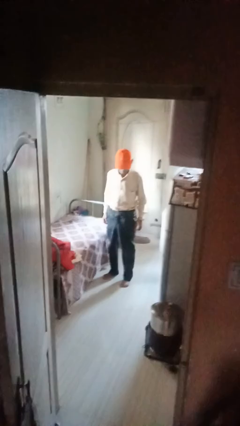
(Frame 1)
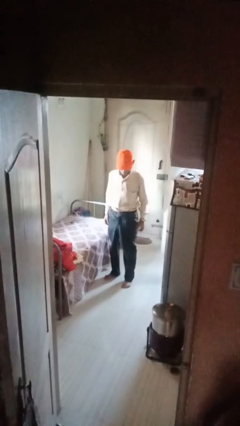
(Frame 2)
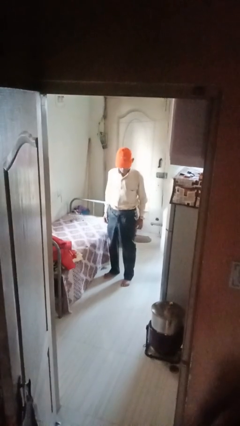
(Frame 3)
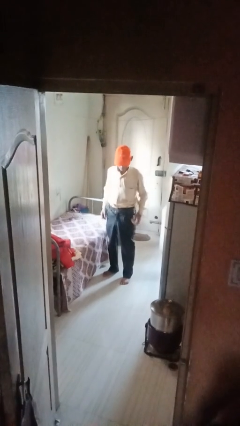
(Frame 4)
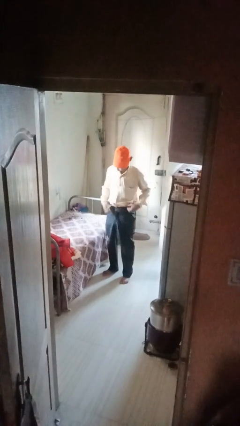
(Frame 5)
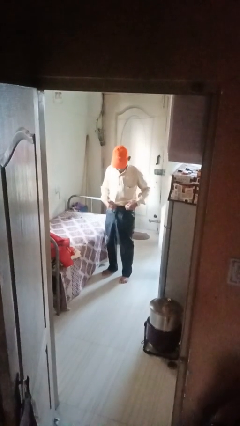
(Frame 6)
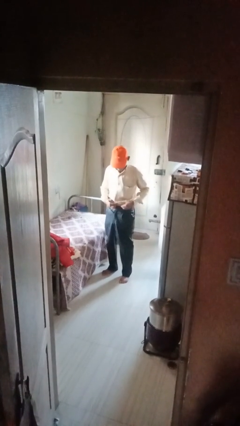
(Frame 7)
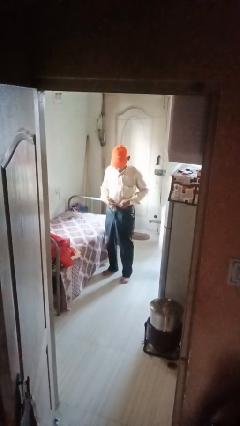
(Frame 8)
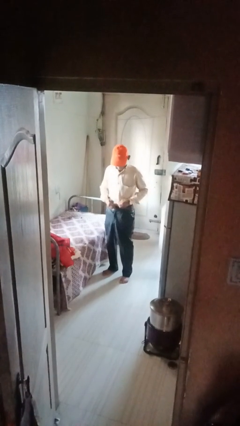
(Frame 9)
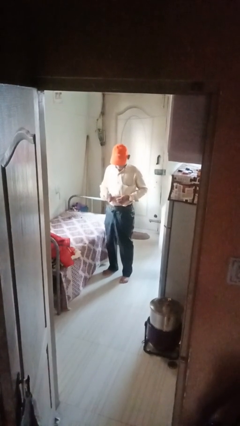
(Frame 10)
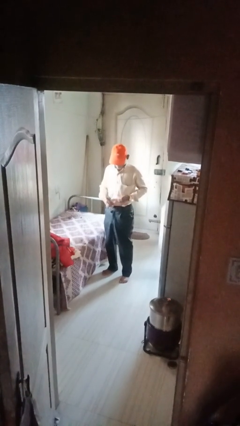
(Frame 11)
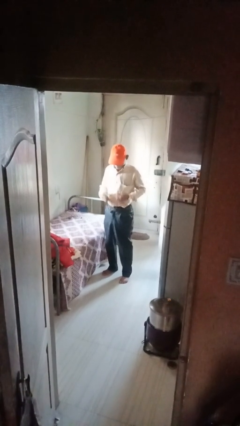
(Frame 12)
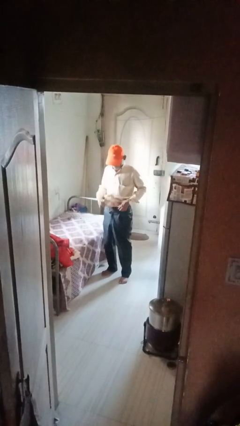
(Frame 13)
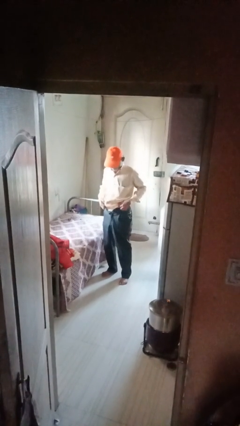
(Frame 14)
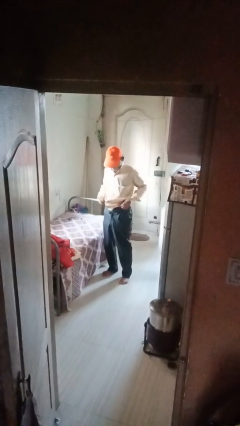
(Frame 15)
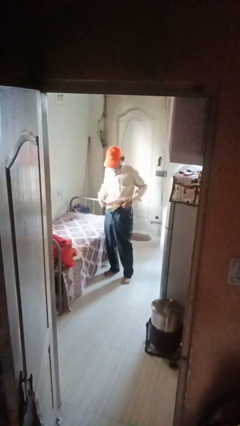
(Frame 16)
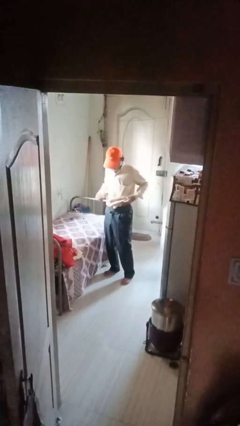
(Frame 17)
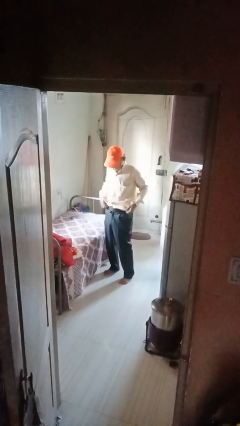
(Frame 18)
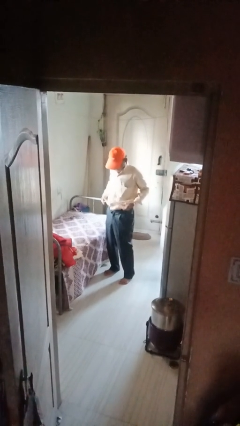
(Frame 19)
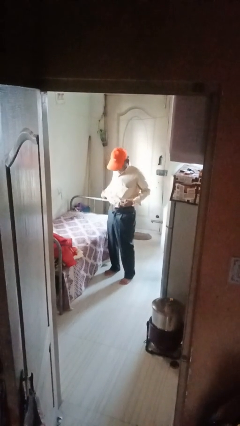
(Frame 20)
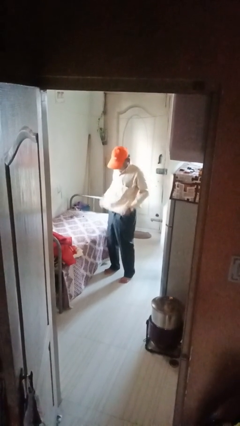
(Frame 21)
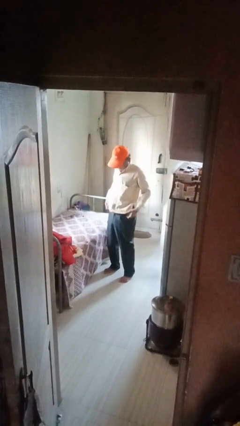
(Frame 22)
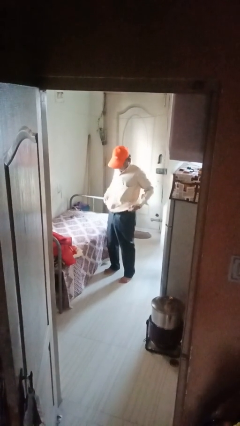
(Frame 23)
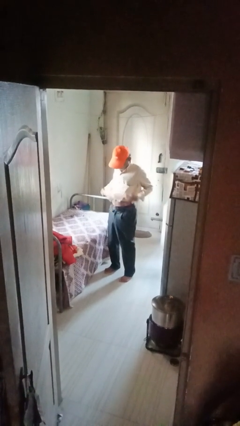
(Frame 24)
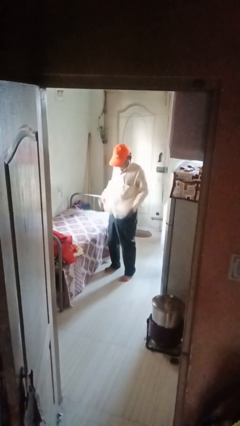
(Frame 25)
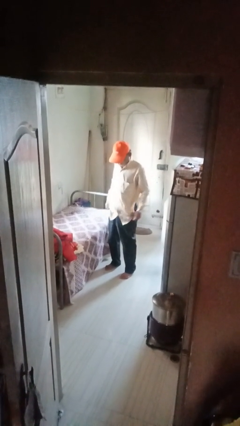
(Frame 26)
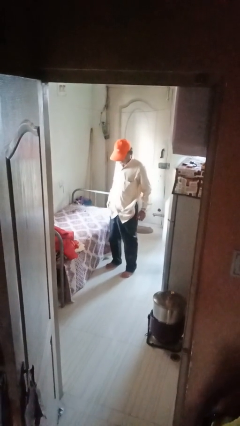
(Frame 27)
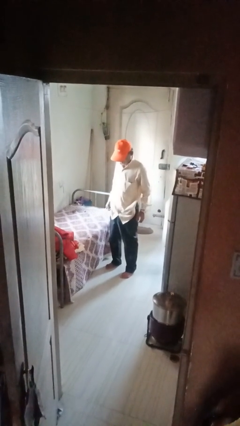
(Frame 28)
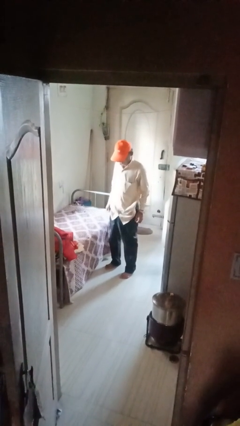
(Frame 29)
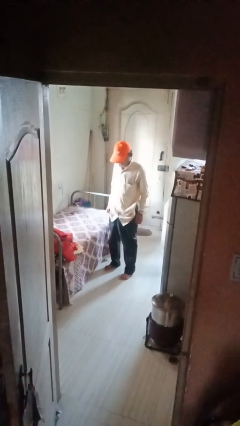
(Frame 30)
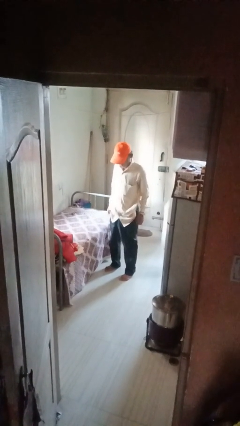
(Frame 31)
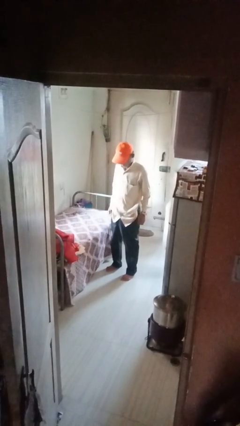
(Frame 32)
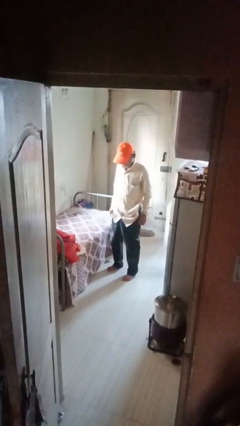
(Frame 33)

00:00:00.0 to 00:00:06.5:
person untucks shirt

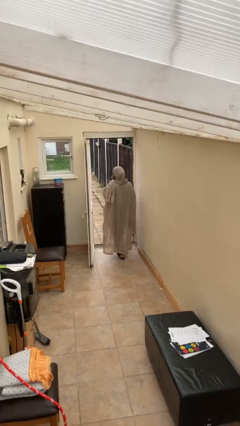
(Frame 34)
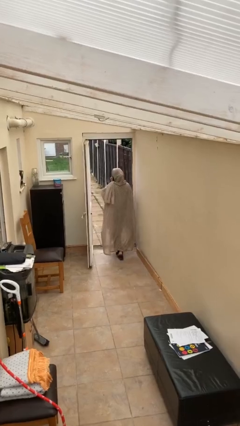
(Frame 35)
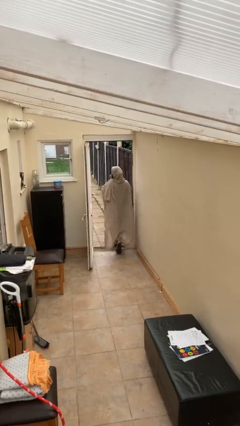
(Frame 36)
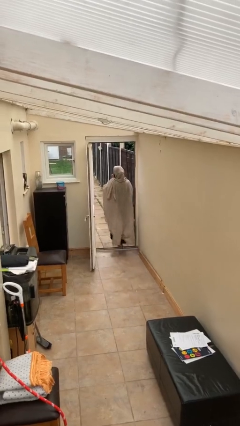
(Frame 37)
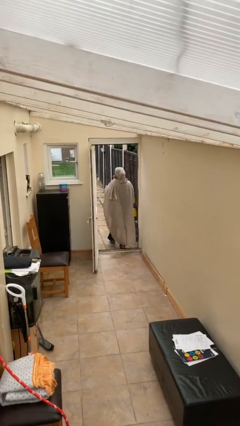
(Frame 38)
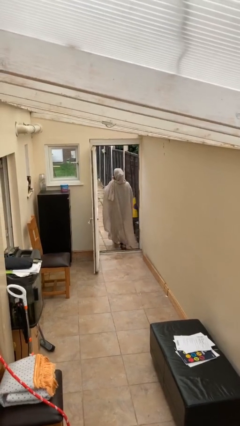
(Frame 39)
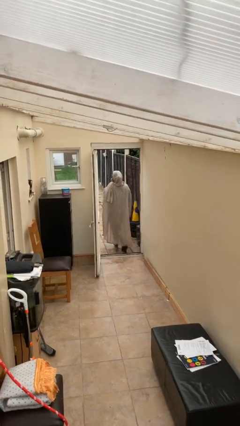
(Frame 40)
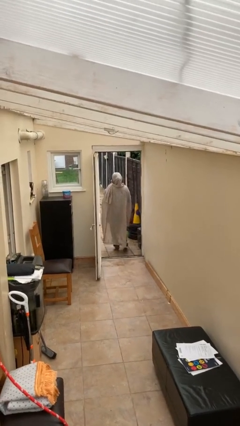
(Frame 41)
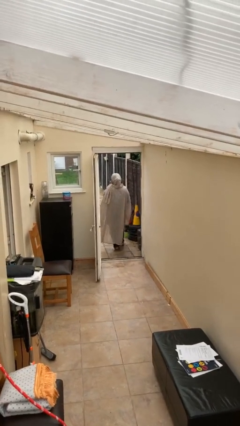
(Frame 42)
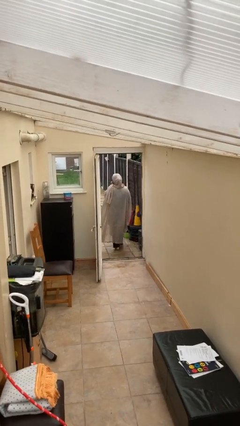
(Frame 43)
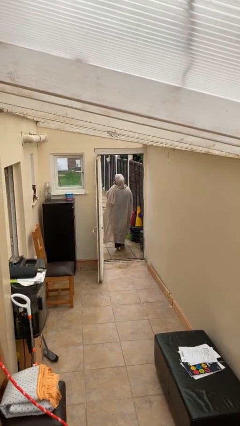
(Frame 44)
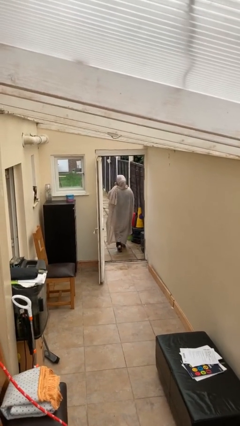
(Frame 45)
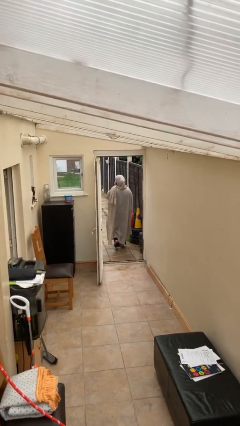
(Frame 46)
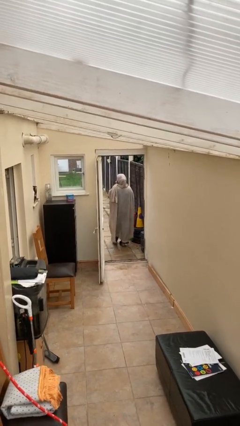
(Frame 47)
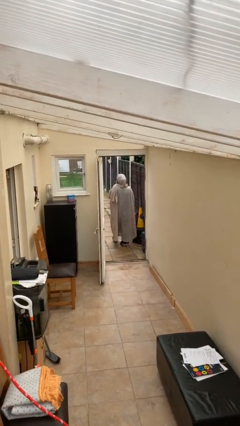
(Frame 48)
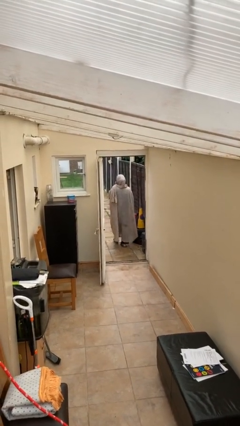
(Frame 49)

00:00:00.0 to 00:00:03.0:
person exits scene through structure

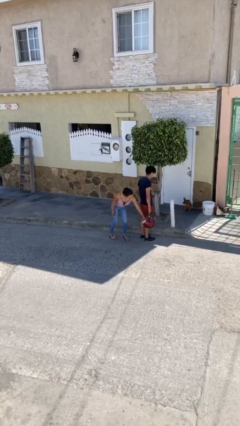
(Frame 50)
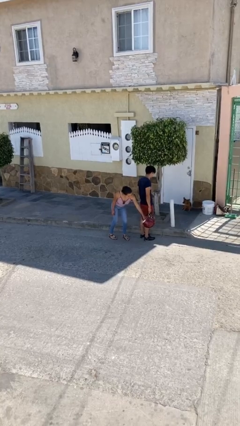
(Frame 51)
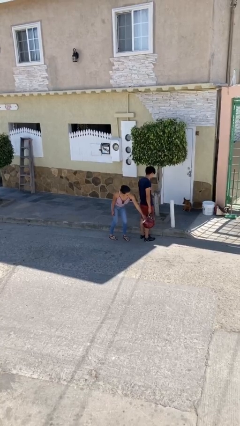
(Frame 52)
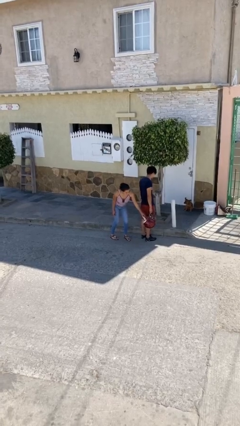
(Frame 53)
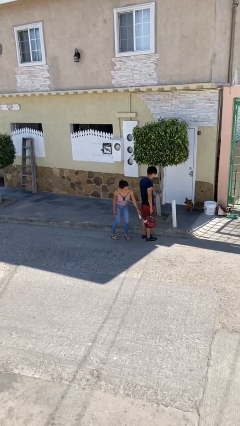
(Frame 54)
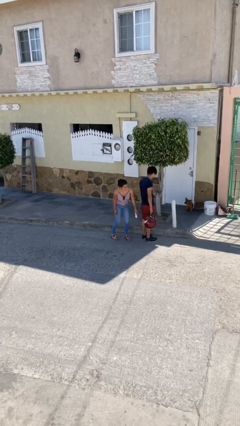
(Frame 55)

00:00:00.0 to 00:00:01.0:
person steals object from person

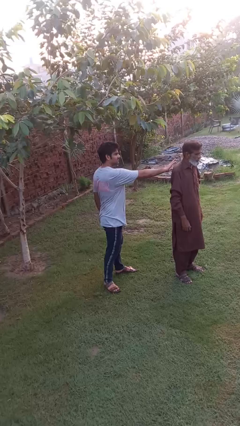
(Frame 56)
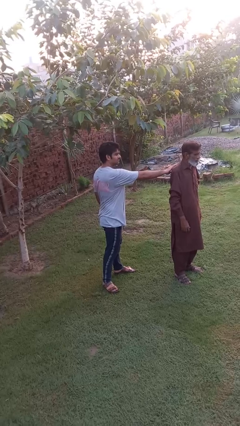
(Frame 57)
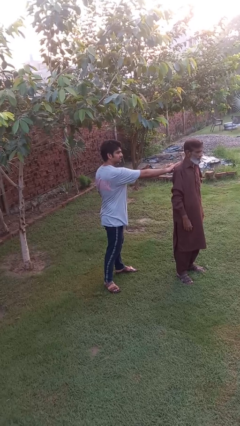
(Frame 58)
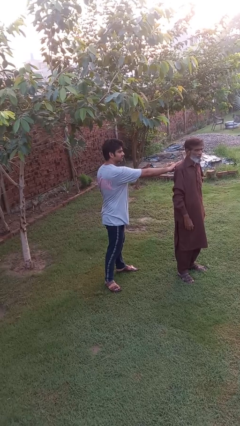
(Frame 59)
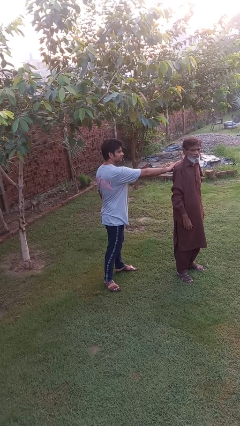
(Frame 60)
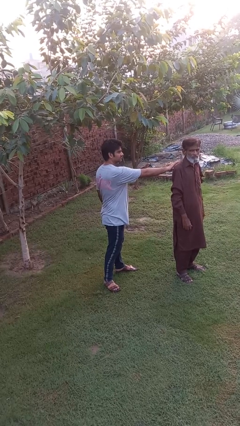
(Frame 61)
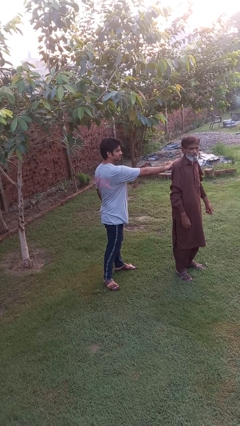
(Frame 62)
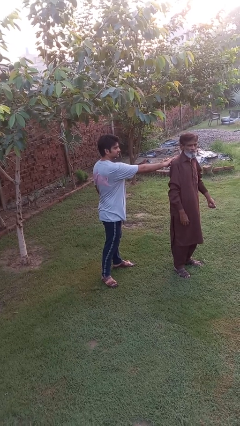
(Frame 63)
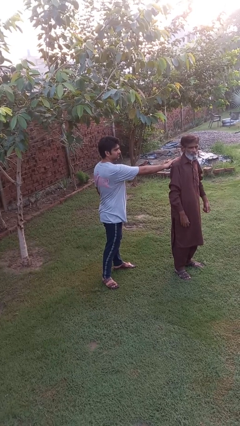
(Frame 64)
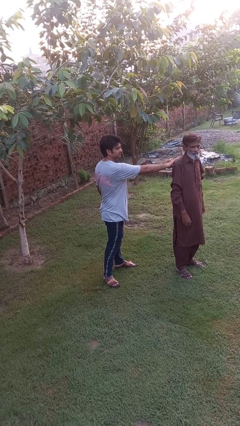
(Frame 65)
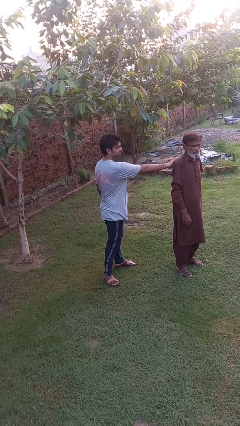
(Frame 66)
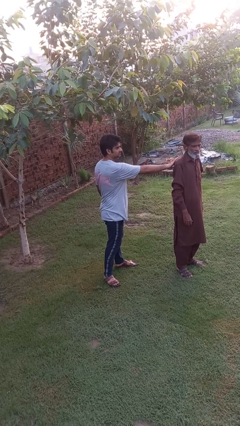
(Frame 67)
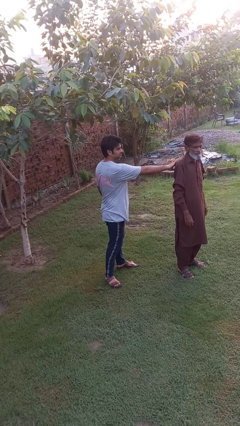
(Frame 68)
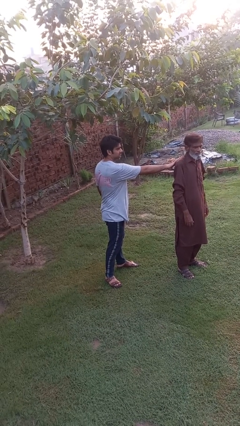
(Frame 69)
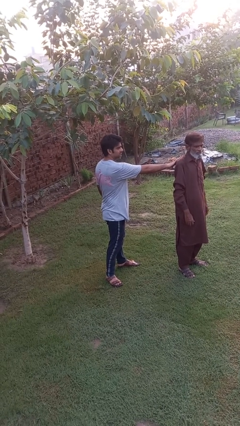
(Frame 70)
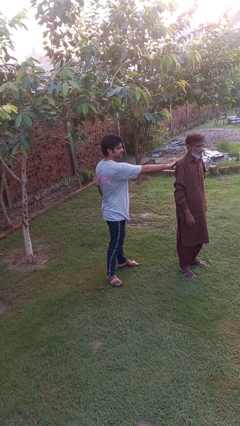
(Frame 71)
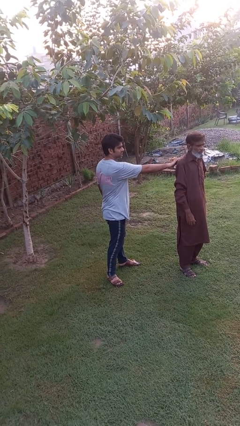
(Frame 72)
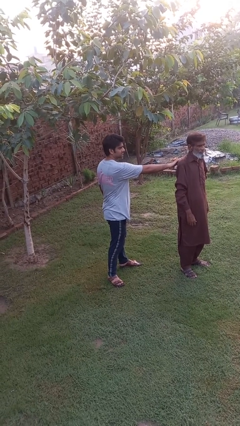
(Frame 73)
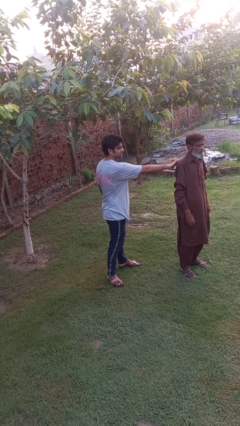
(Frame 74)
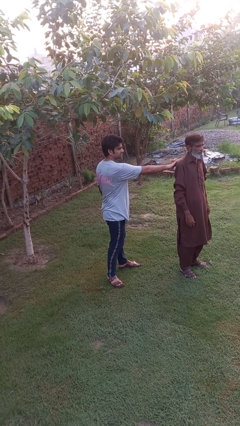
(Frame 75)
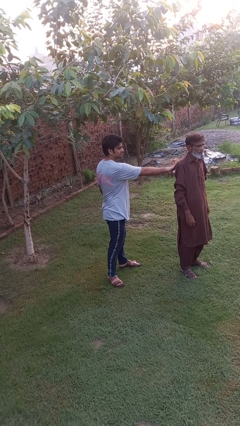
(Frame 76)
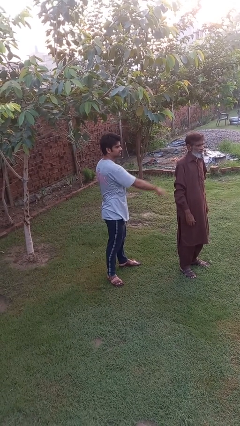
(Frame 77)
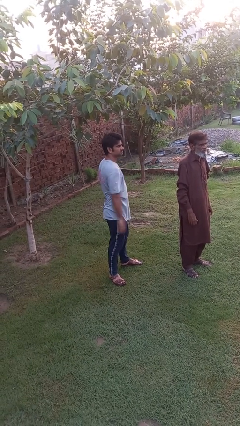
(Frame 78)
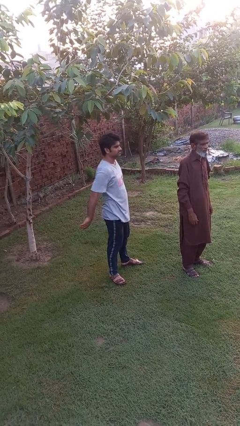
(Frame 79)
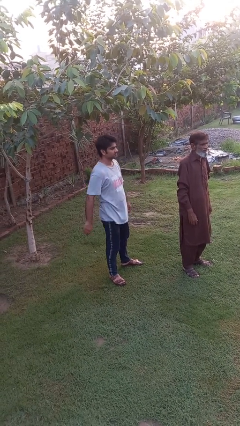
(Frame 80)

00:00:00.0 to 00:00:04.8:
person touches back of person

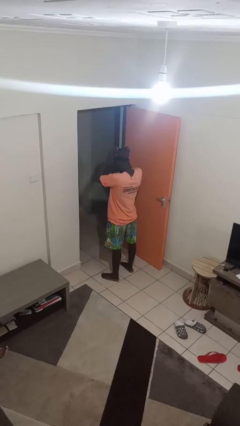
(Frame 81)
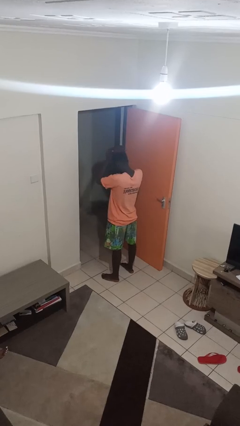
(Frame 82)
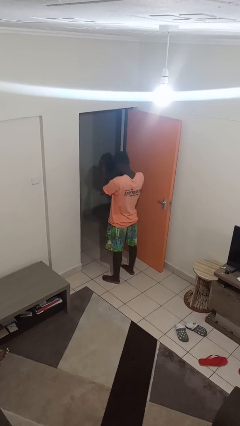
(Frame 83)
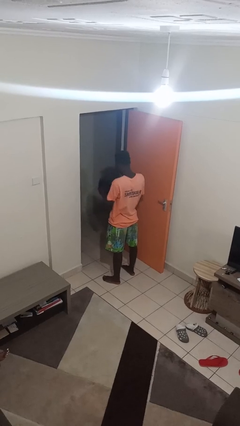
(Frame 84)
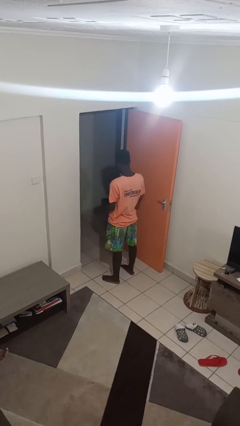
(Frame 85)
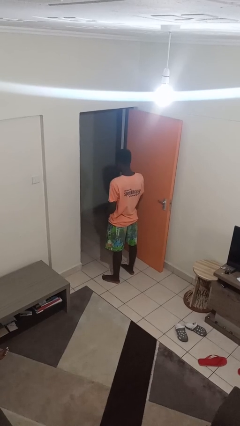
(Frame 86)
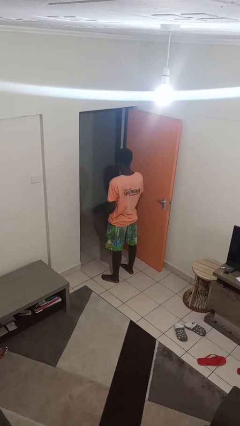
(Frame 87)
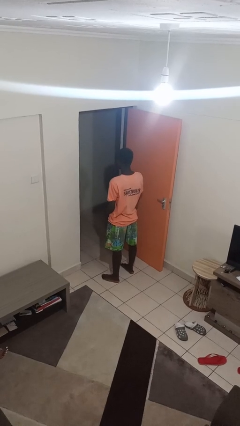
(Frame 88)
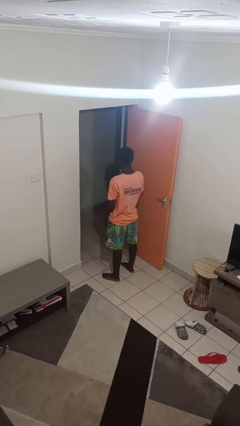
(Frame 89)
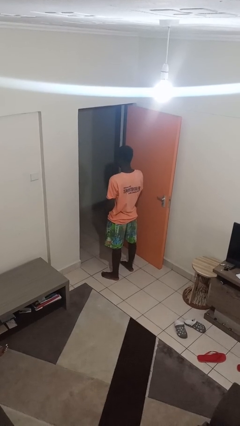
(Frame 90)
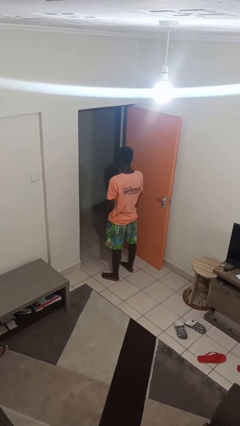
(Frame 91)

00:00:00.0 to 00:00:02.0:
person takes off hat

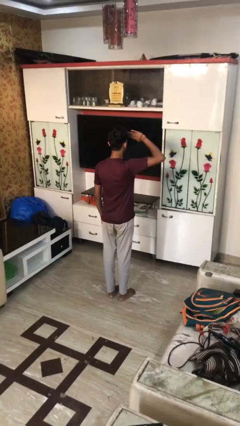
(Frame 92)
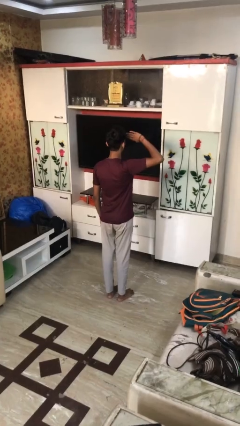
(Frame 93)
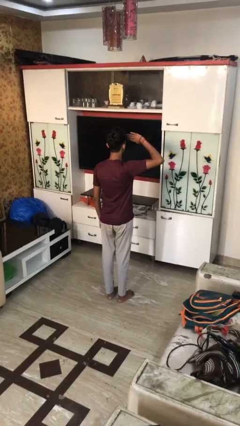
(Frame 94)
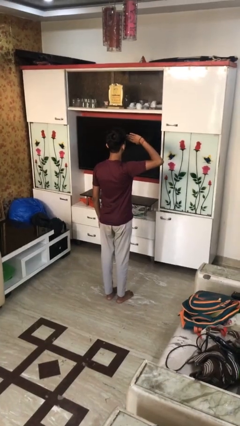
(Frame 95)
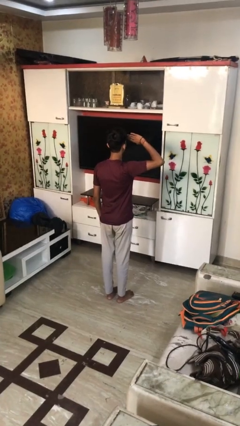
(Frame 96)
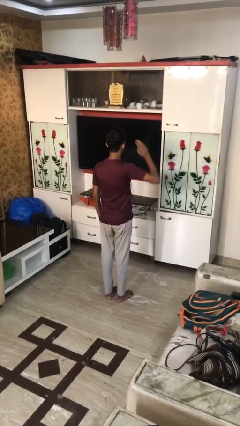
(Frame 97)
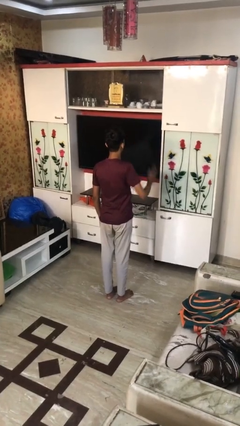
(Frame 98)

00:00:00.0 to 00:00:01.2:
person salutes
